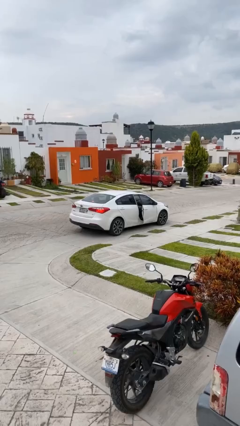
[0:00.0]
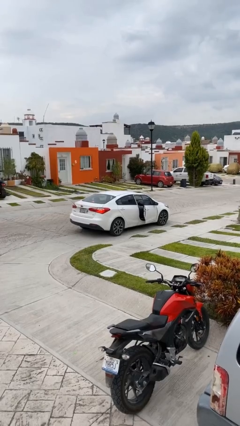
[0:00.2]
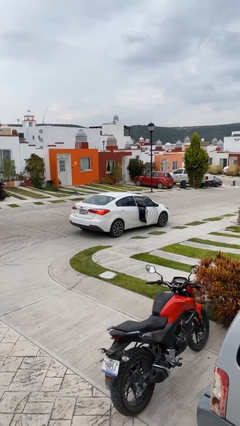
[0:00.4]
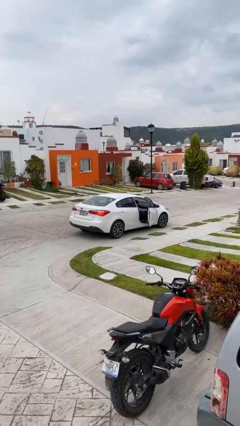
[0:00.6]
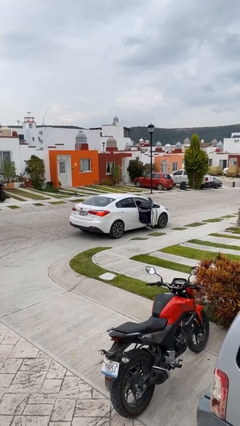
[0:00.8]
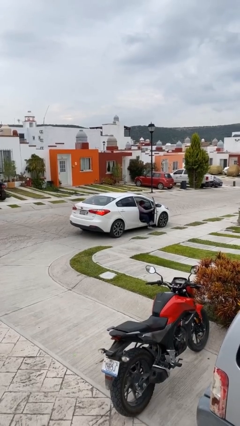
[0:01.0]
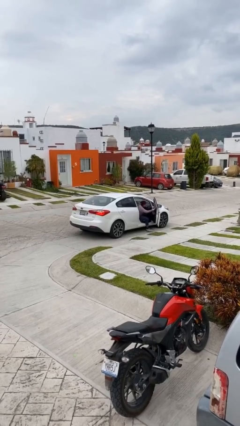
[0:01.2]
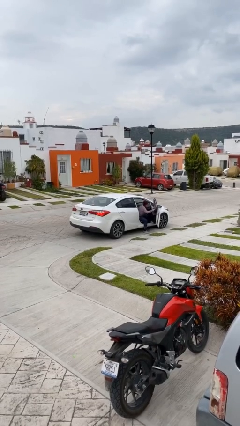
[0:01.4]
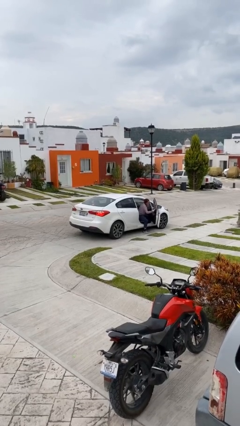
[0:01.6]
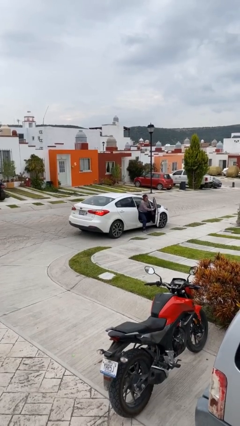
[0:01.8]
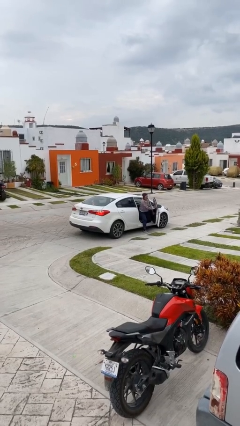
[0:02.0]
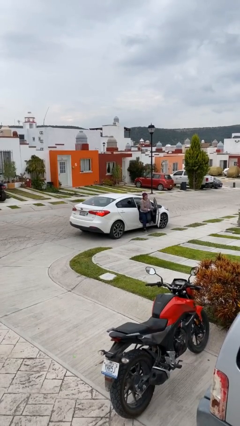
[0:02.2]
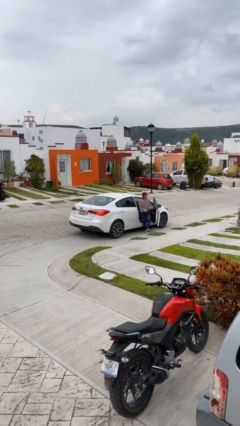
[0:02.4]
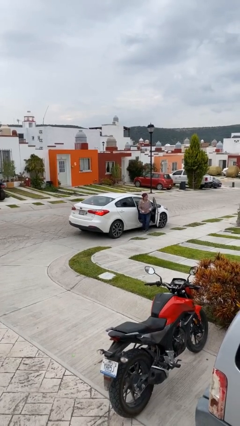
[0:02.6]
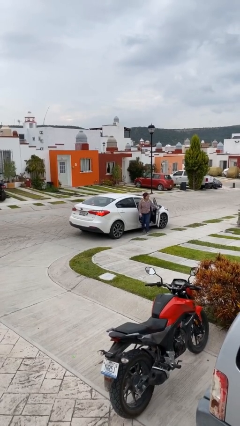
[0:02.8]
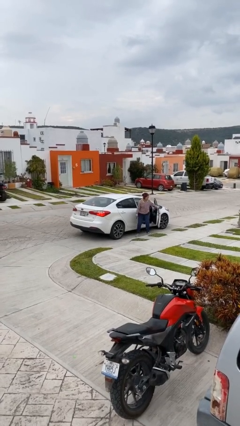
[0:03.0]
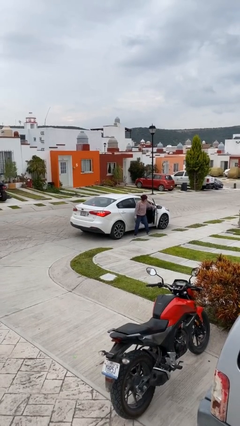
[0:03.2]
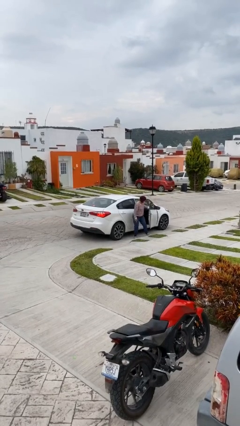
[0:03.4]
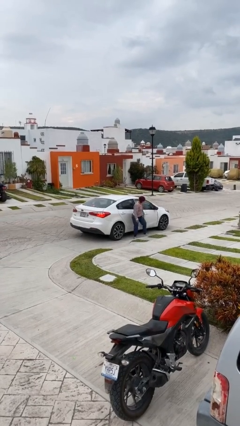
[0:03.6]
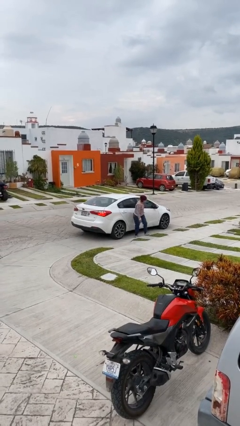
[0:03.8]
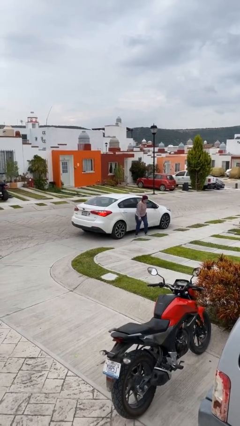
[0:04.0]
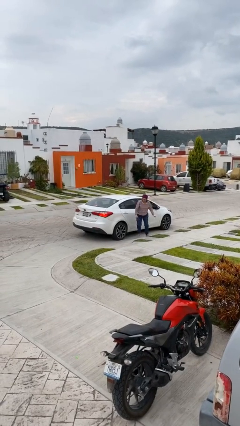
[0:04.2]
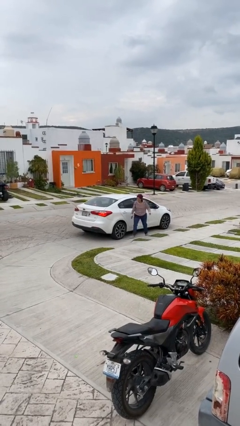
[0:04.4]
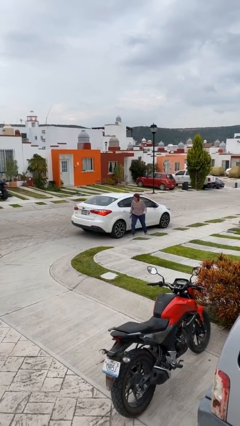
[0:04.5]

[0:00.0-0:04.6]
car drops off person

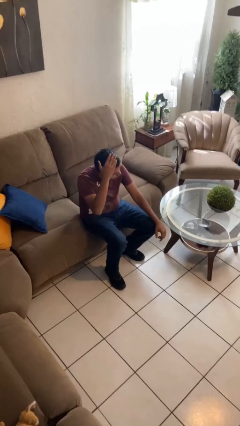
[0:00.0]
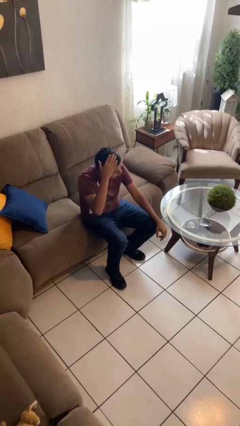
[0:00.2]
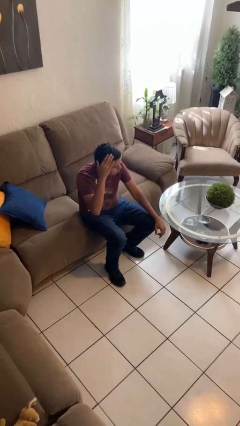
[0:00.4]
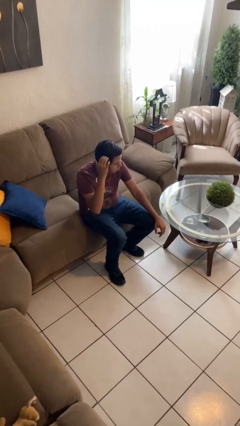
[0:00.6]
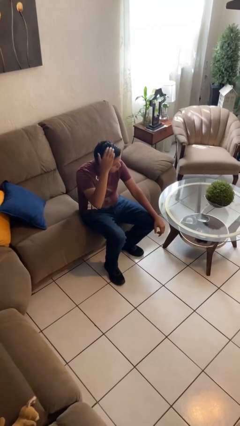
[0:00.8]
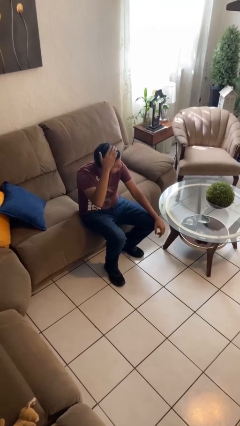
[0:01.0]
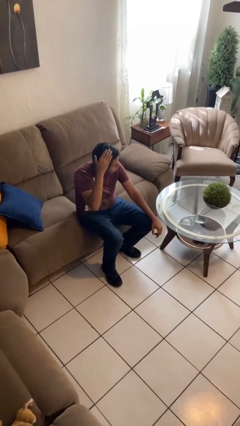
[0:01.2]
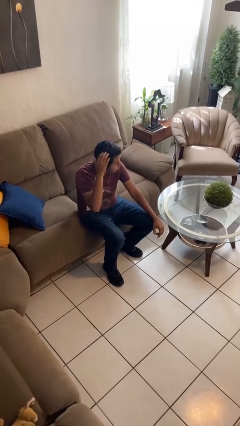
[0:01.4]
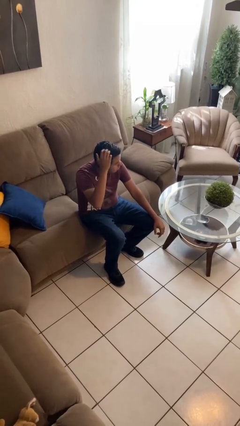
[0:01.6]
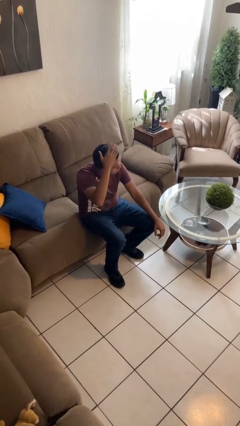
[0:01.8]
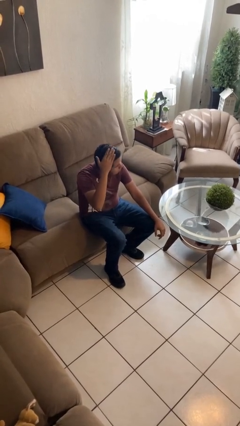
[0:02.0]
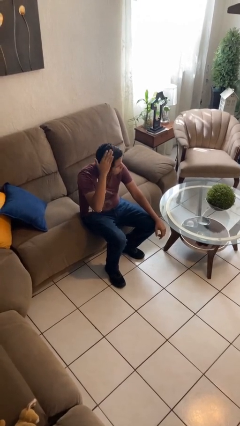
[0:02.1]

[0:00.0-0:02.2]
person pats head

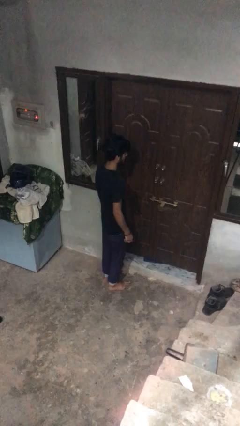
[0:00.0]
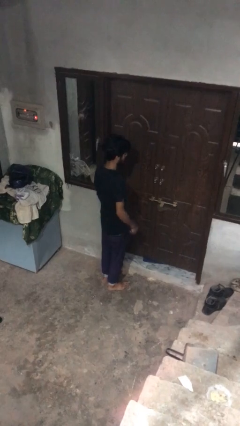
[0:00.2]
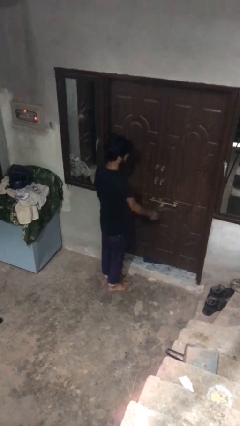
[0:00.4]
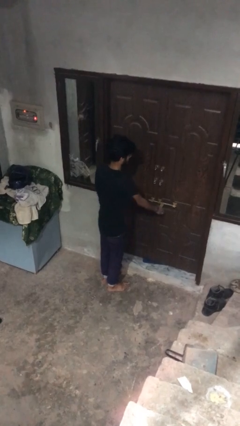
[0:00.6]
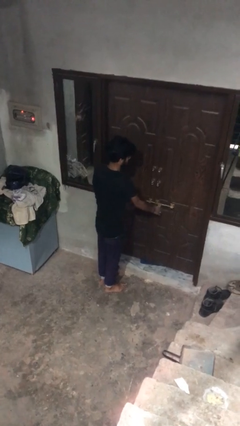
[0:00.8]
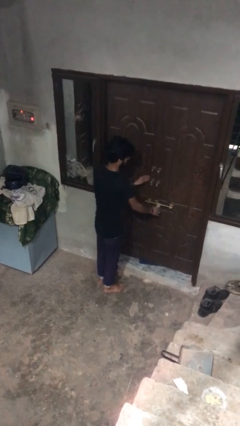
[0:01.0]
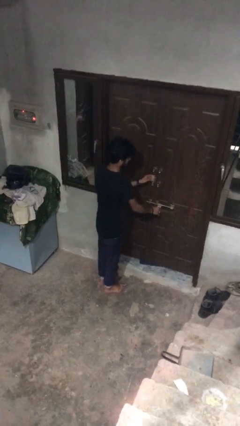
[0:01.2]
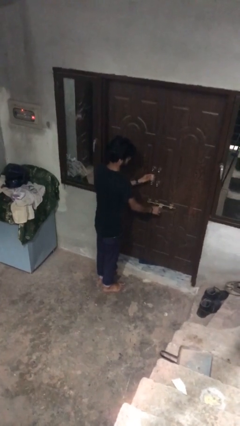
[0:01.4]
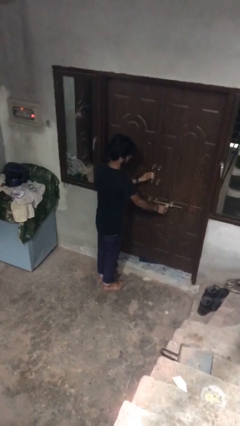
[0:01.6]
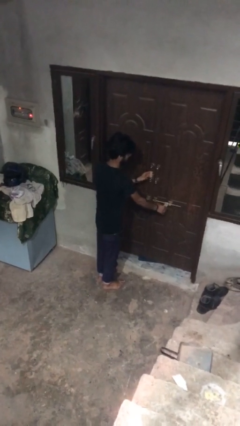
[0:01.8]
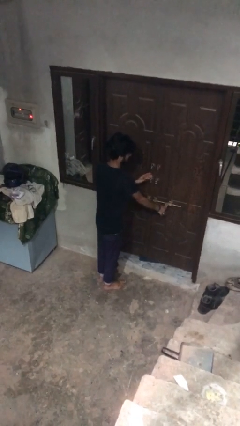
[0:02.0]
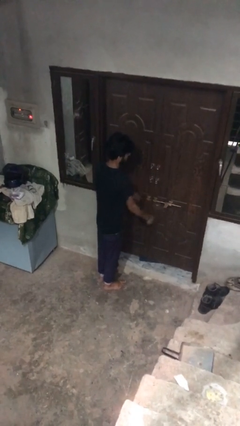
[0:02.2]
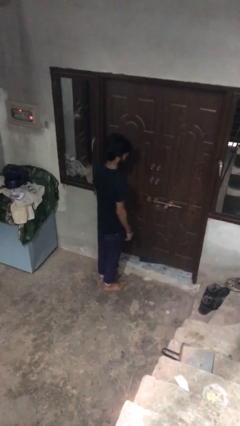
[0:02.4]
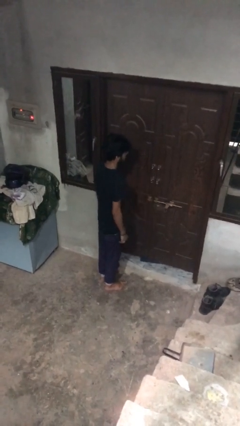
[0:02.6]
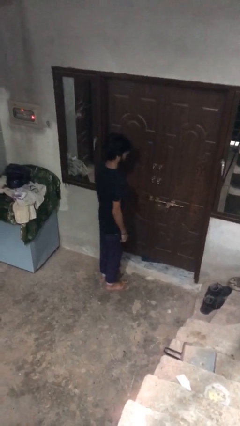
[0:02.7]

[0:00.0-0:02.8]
person unlocks door with keys

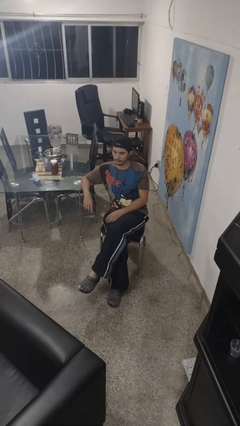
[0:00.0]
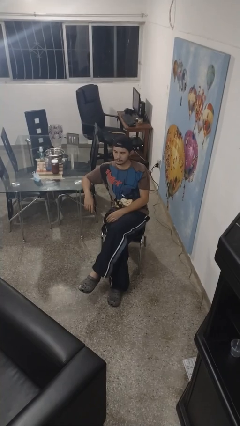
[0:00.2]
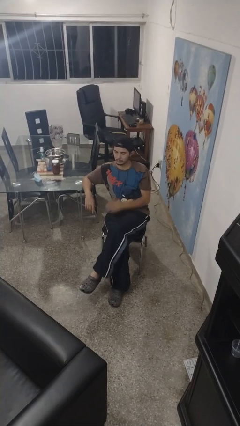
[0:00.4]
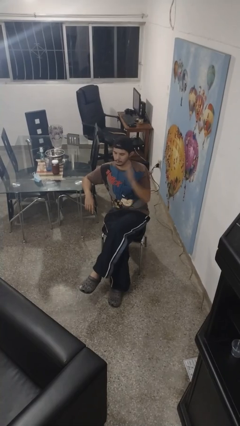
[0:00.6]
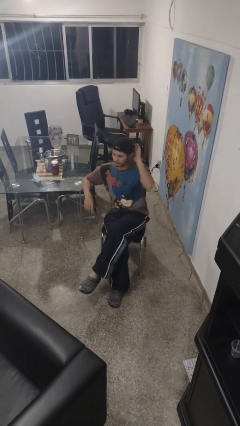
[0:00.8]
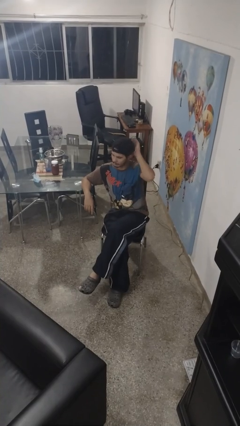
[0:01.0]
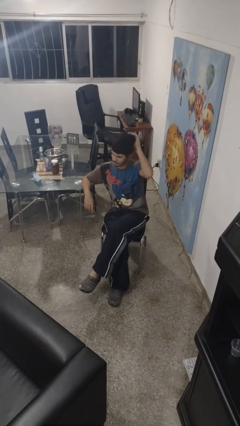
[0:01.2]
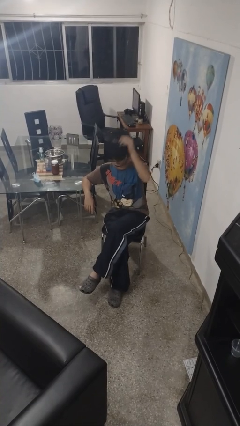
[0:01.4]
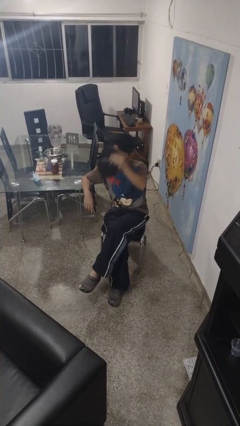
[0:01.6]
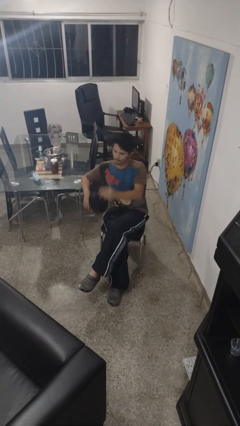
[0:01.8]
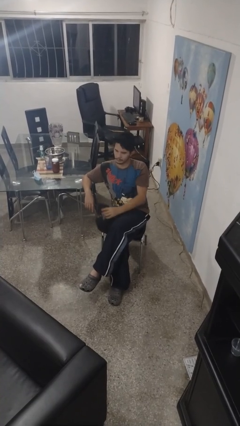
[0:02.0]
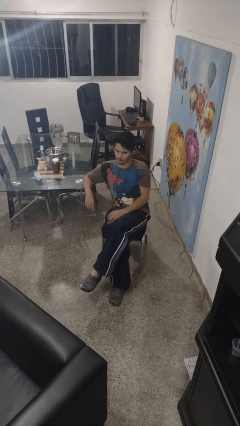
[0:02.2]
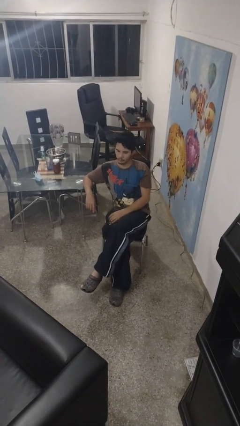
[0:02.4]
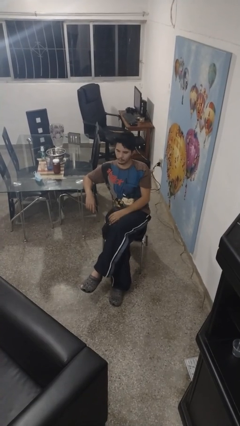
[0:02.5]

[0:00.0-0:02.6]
person takes off hat

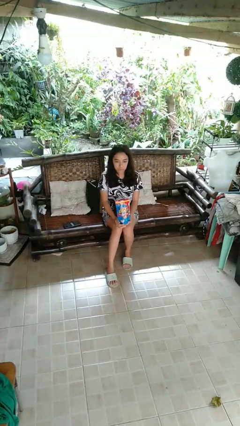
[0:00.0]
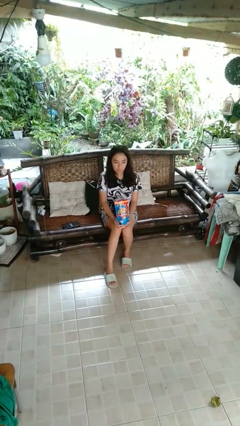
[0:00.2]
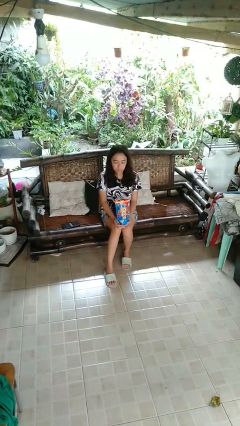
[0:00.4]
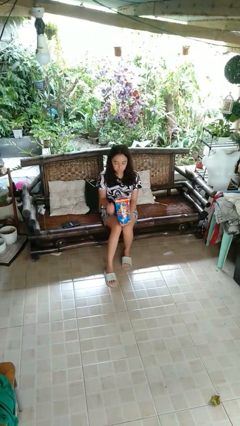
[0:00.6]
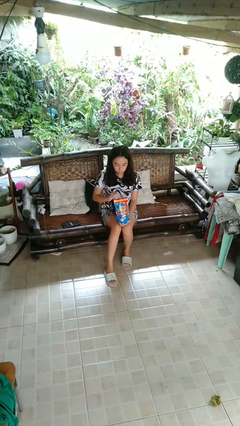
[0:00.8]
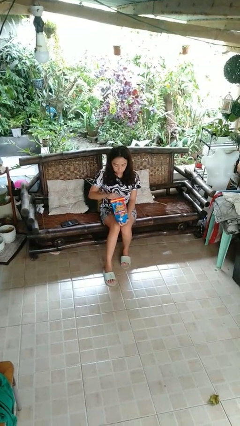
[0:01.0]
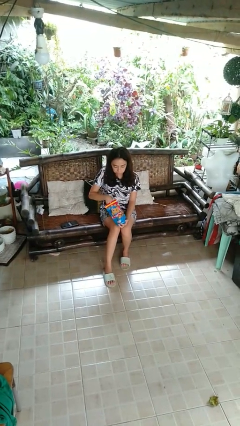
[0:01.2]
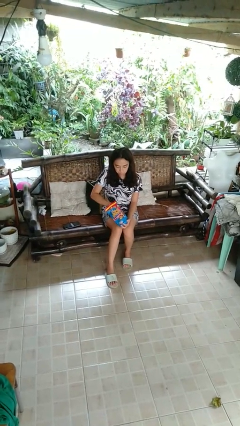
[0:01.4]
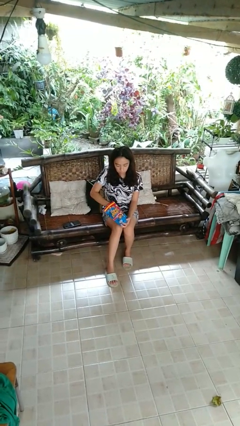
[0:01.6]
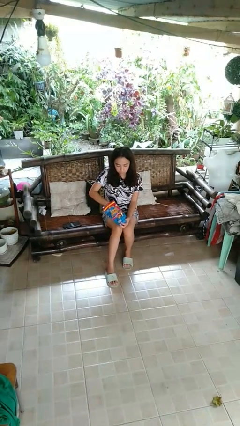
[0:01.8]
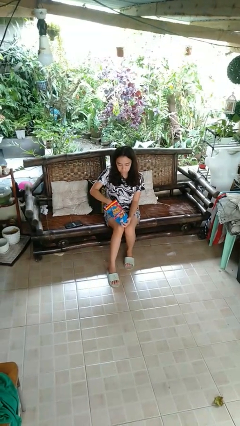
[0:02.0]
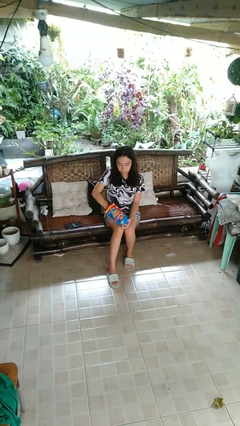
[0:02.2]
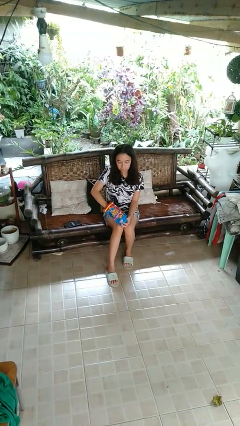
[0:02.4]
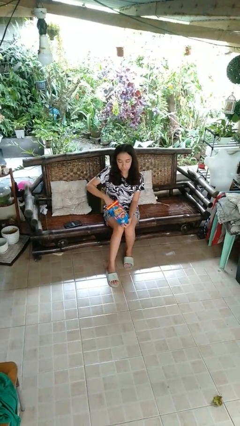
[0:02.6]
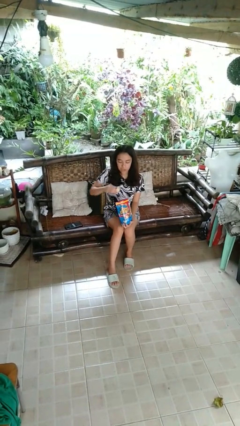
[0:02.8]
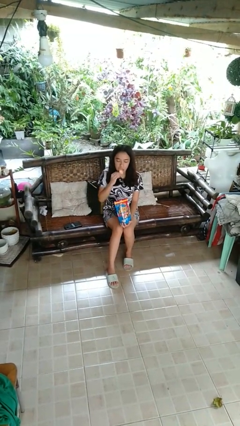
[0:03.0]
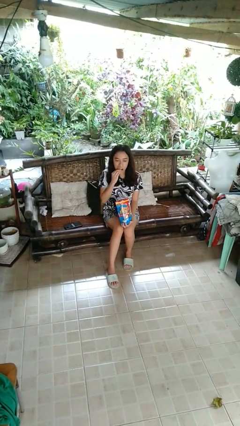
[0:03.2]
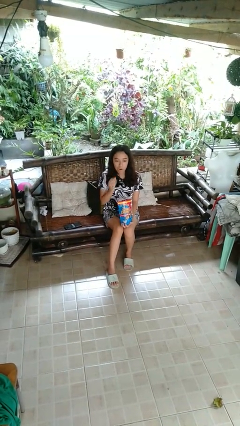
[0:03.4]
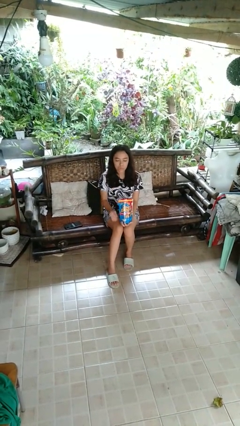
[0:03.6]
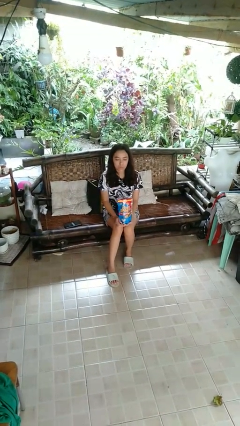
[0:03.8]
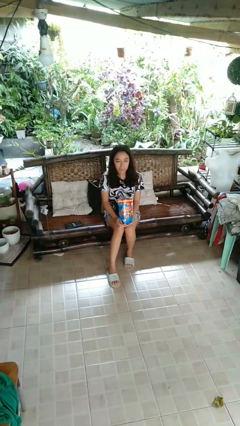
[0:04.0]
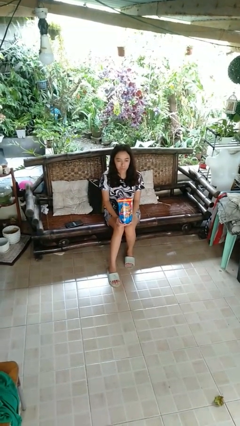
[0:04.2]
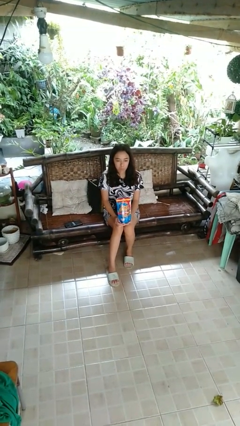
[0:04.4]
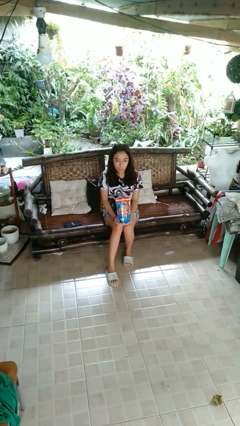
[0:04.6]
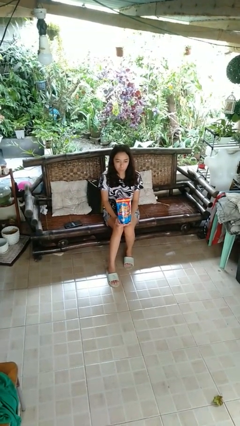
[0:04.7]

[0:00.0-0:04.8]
person eats snack from bag

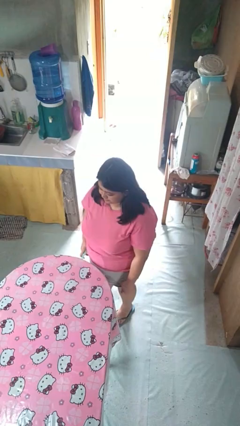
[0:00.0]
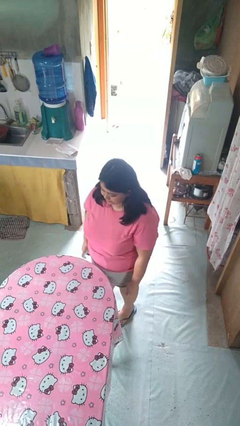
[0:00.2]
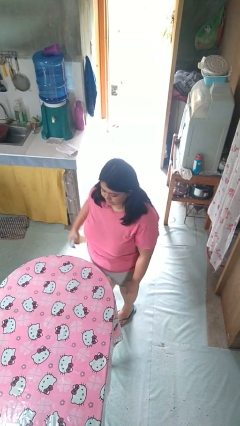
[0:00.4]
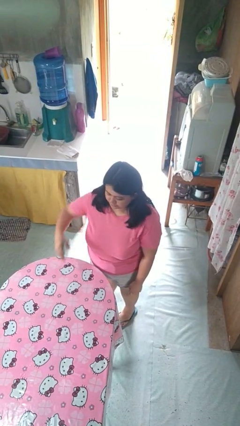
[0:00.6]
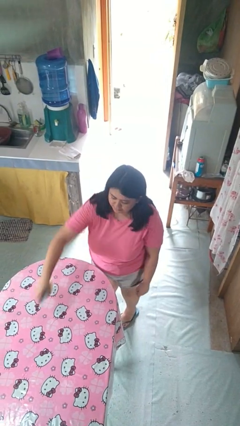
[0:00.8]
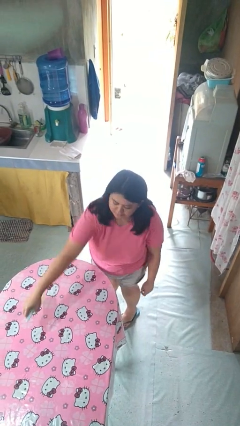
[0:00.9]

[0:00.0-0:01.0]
person sprays from bottle
